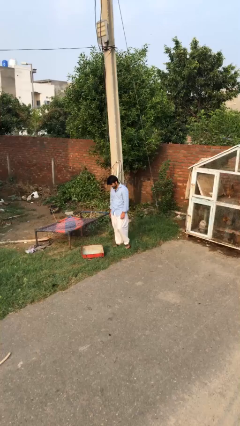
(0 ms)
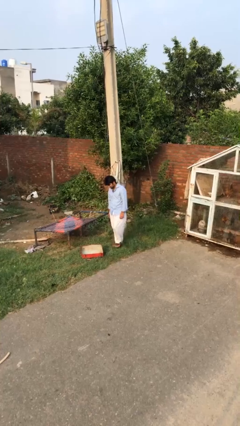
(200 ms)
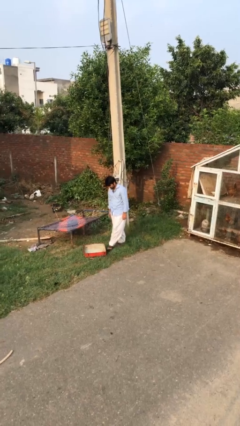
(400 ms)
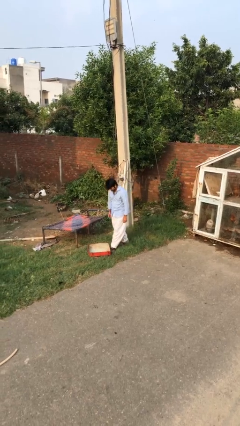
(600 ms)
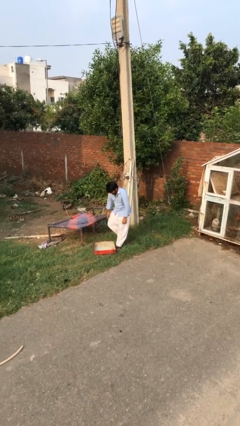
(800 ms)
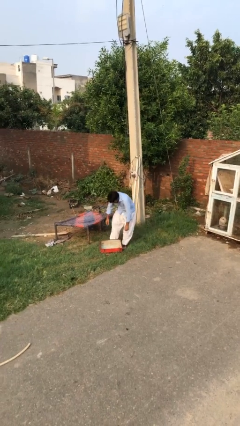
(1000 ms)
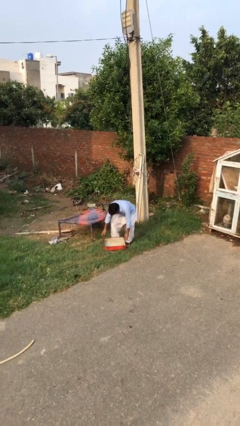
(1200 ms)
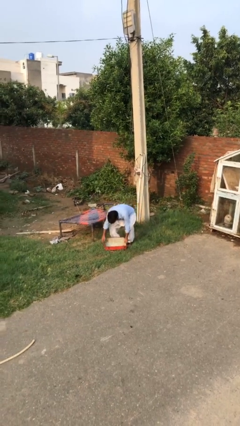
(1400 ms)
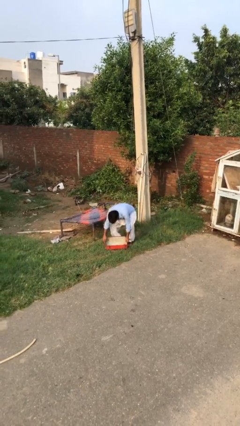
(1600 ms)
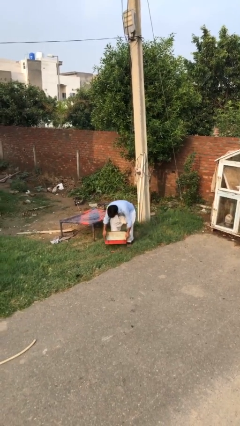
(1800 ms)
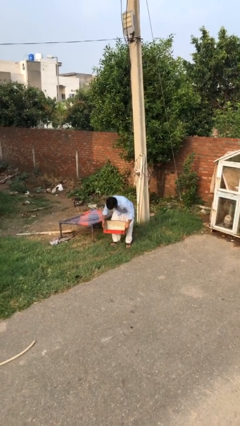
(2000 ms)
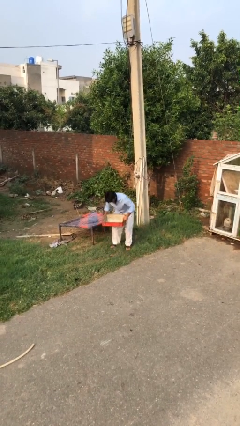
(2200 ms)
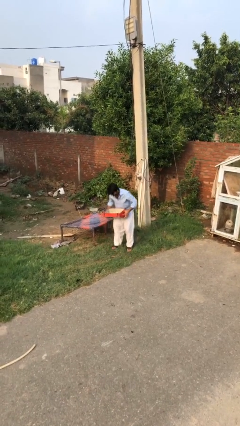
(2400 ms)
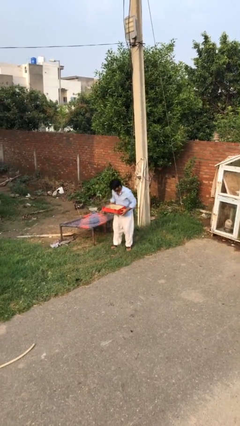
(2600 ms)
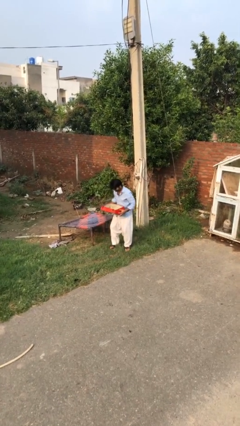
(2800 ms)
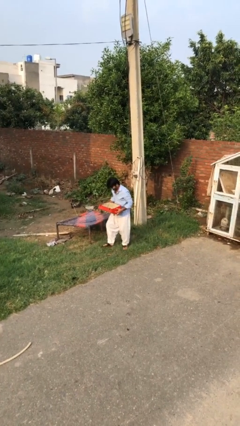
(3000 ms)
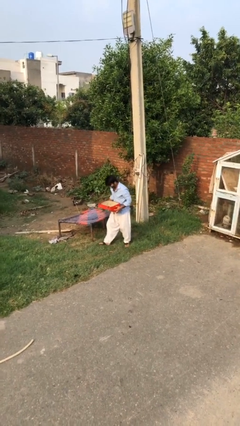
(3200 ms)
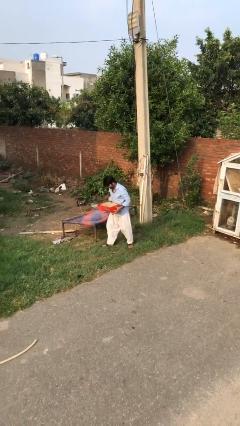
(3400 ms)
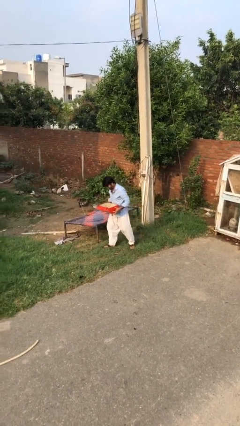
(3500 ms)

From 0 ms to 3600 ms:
person picks up object from floor

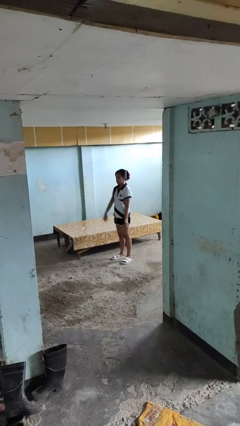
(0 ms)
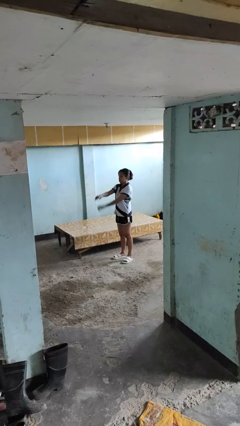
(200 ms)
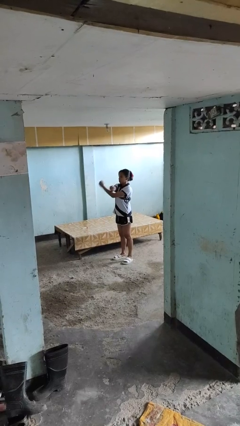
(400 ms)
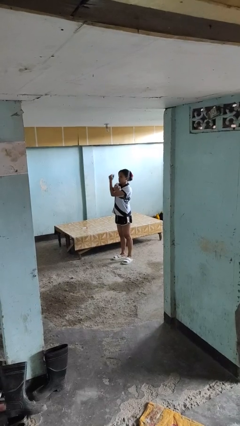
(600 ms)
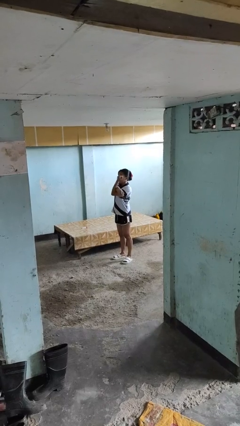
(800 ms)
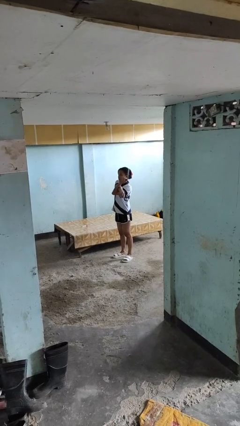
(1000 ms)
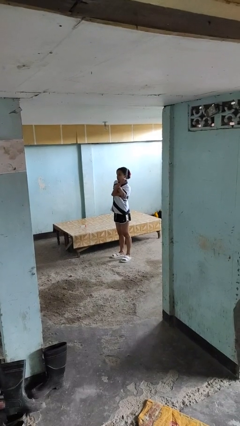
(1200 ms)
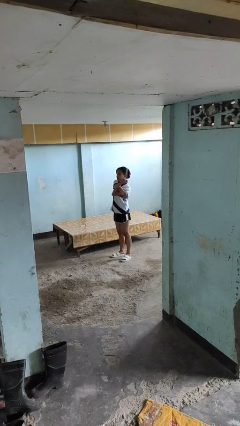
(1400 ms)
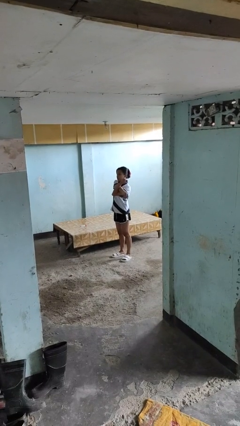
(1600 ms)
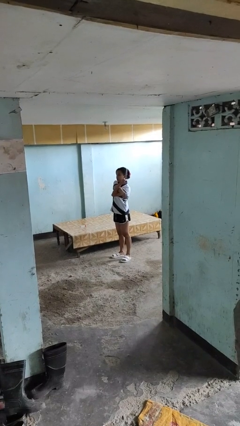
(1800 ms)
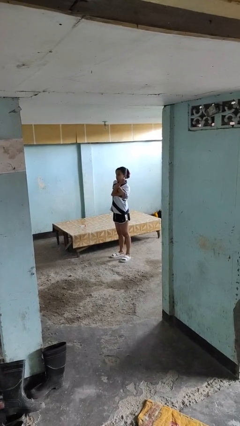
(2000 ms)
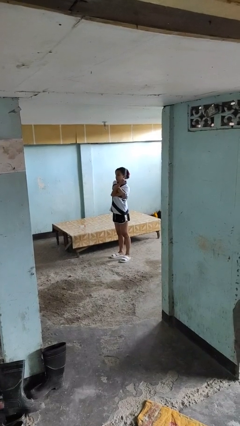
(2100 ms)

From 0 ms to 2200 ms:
person crosses arms

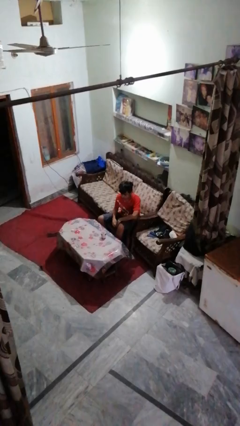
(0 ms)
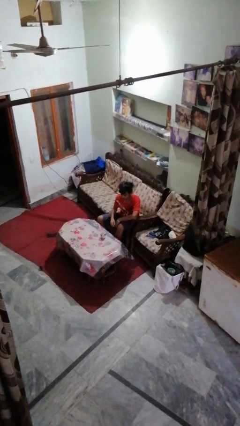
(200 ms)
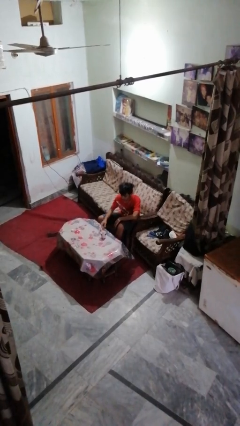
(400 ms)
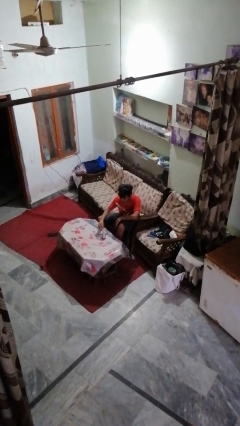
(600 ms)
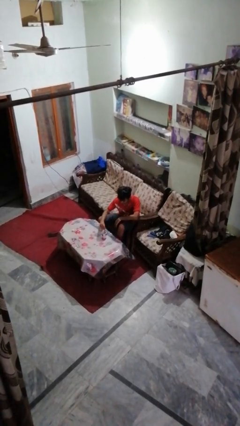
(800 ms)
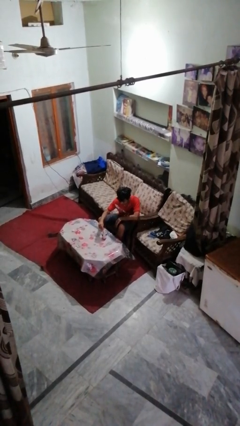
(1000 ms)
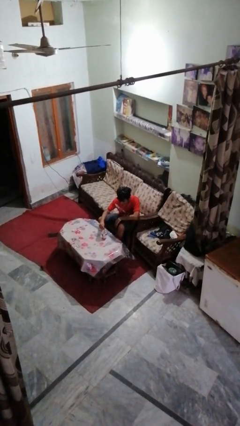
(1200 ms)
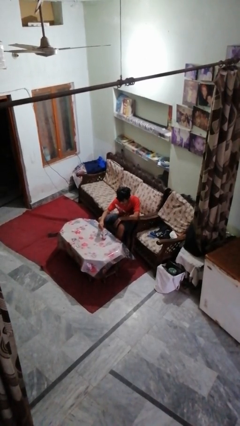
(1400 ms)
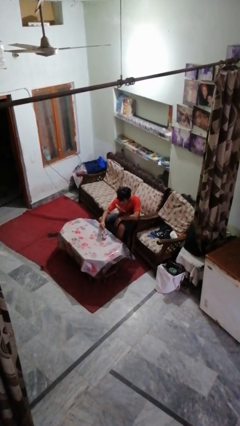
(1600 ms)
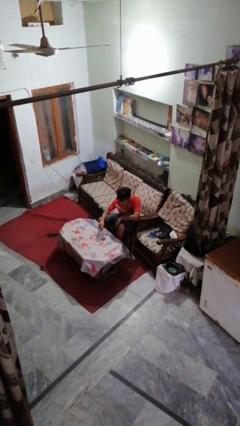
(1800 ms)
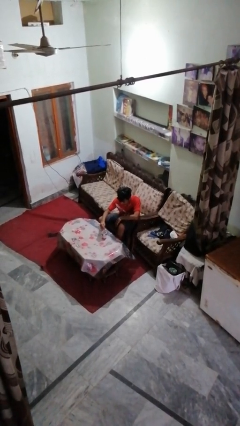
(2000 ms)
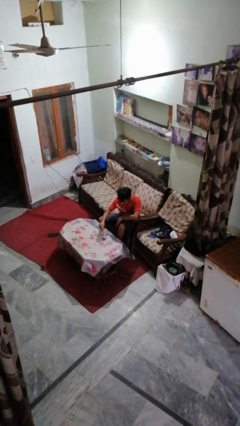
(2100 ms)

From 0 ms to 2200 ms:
person stirs mug

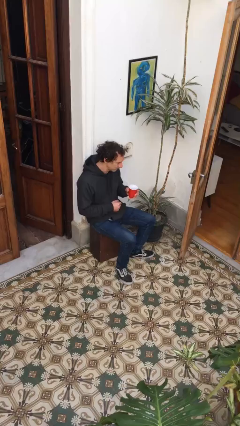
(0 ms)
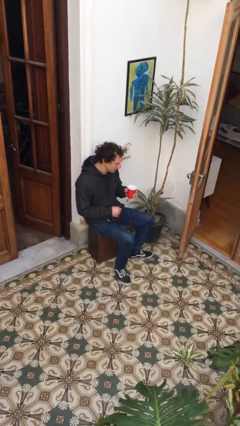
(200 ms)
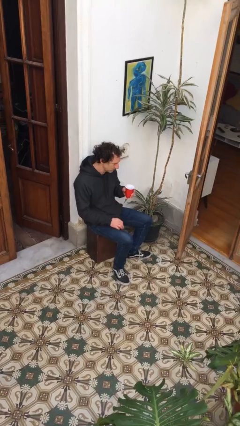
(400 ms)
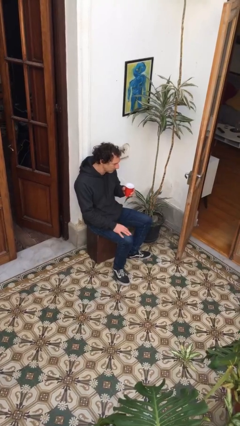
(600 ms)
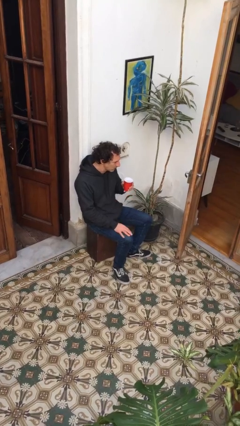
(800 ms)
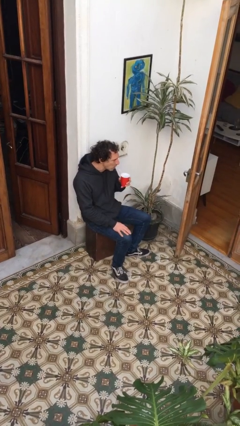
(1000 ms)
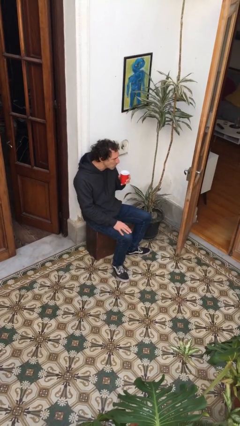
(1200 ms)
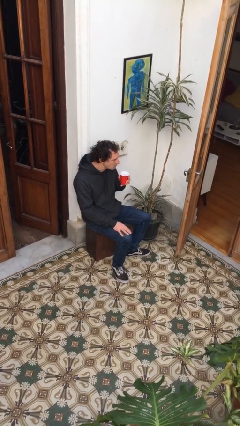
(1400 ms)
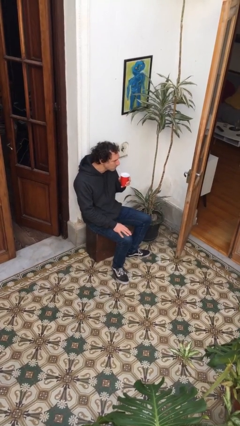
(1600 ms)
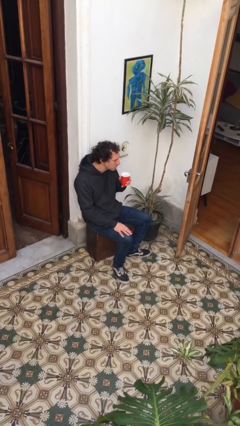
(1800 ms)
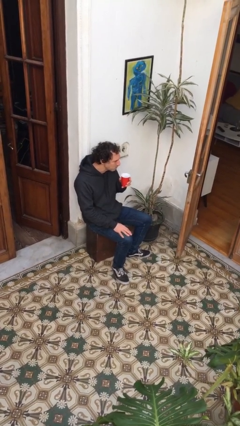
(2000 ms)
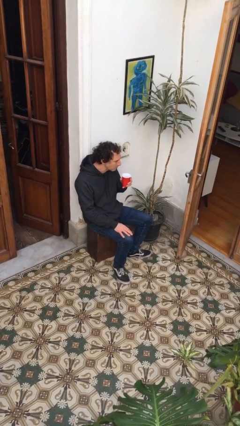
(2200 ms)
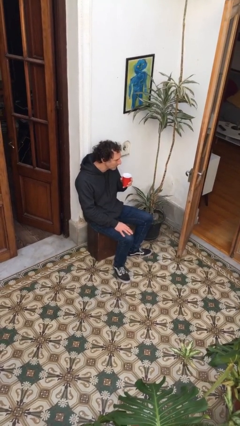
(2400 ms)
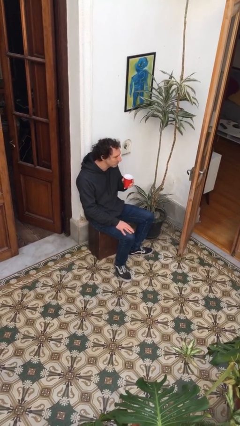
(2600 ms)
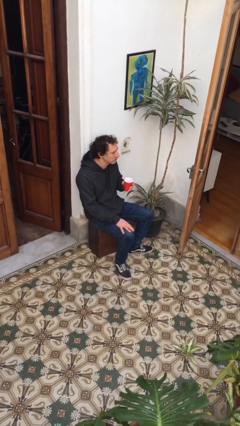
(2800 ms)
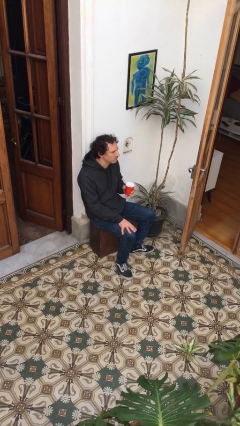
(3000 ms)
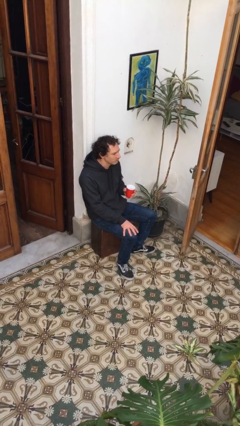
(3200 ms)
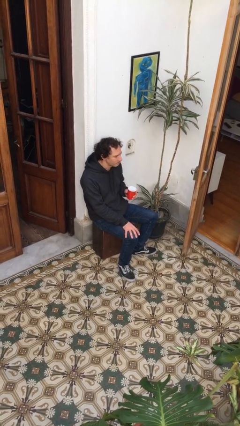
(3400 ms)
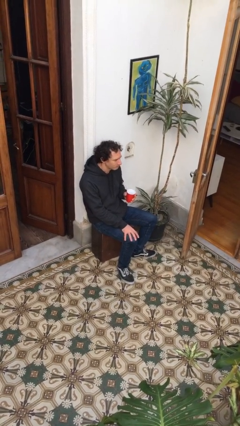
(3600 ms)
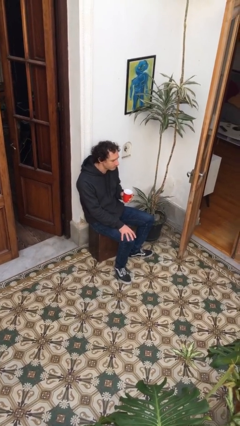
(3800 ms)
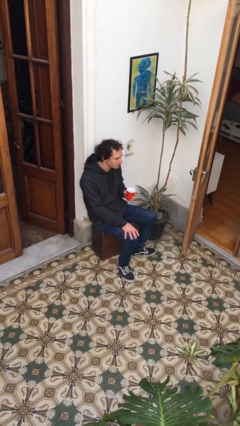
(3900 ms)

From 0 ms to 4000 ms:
person drinks from straw

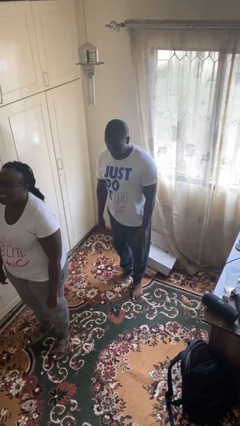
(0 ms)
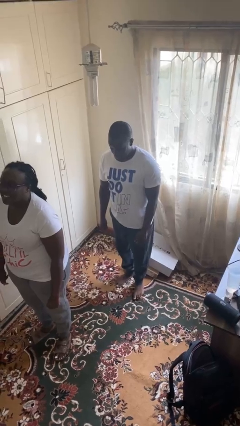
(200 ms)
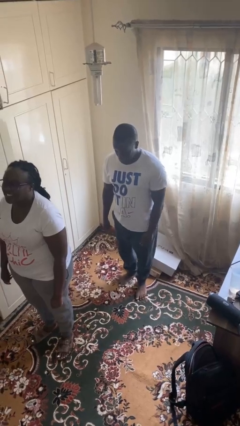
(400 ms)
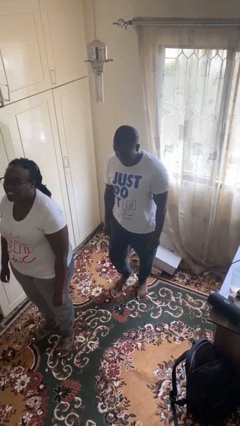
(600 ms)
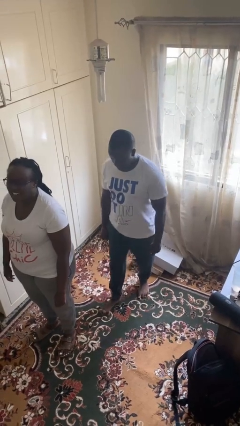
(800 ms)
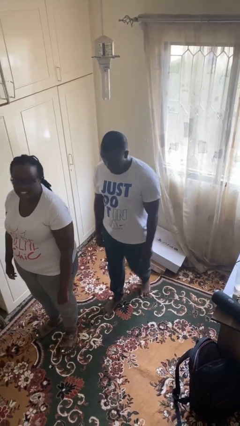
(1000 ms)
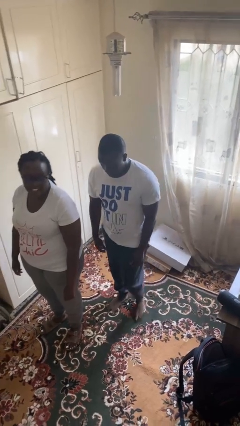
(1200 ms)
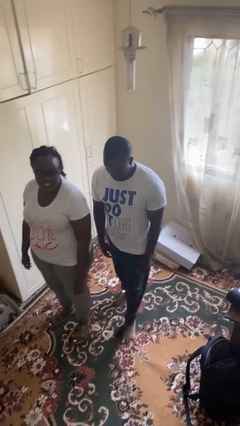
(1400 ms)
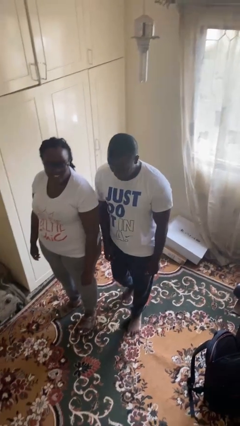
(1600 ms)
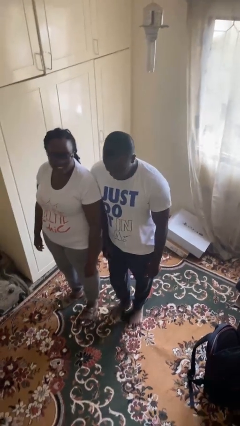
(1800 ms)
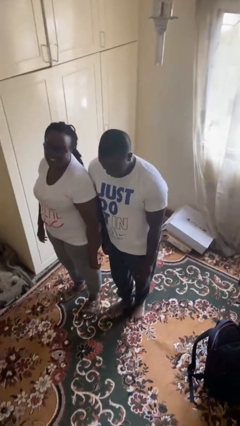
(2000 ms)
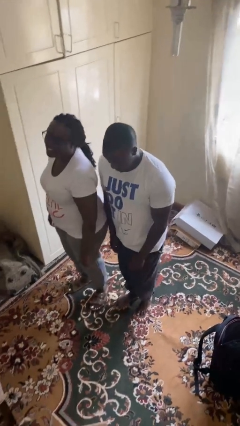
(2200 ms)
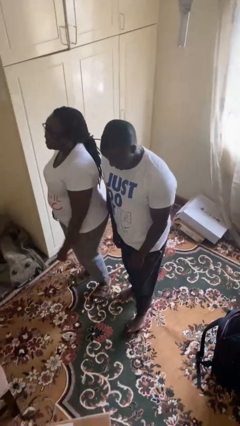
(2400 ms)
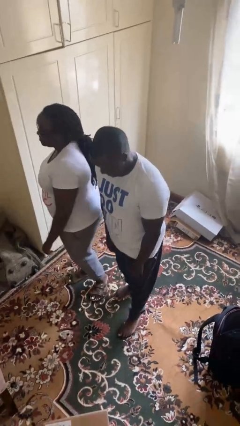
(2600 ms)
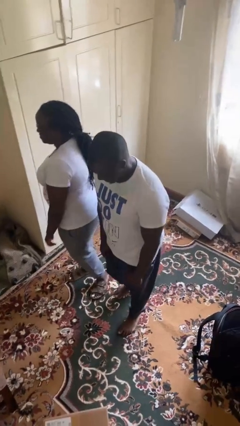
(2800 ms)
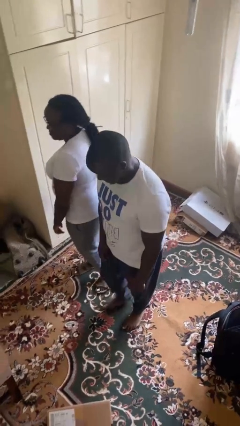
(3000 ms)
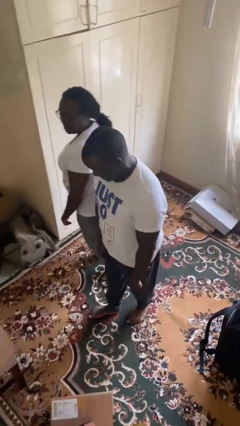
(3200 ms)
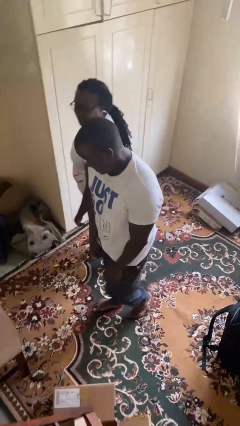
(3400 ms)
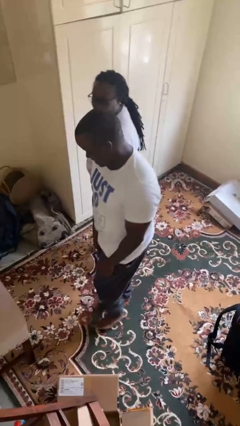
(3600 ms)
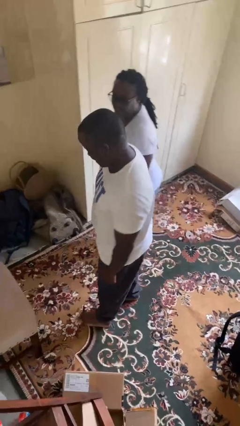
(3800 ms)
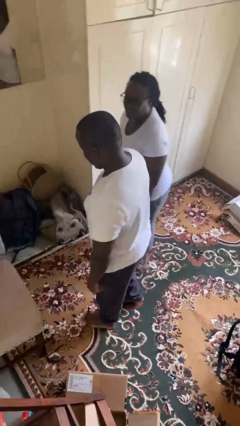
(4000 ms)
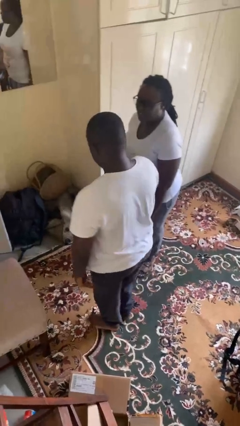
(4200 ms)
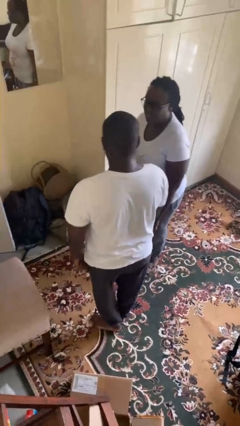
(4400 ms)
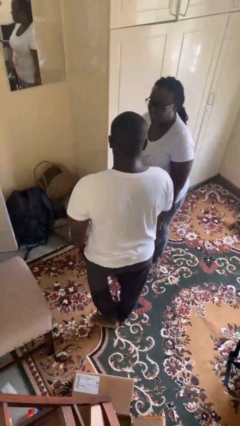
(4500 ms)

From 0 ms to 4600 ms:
person bumps into person

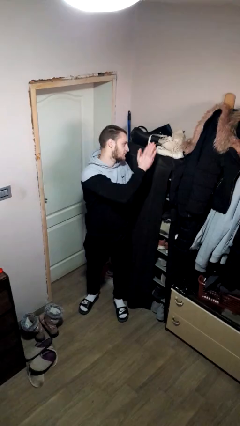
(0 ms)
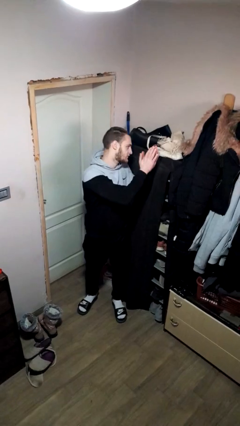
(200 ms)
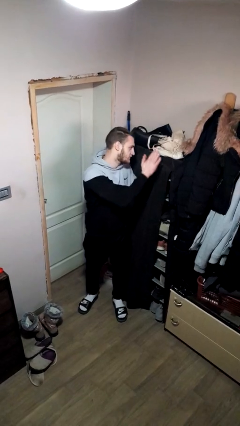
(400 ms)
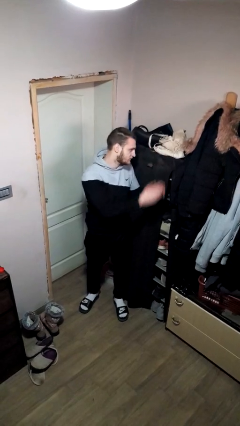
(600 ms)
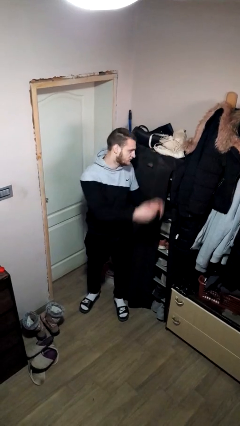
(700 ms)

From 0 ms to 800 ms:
person claps hands
